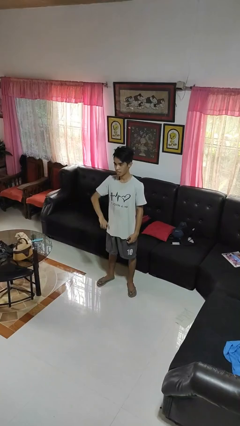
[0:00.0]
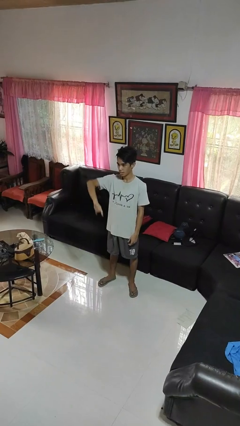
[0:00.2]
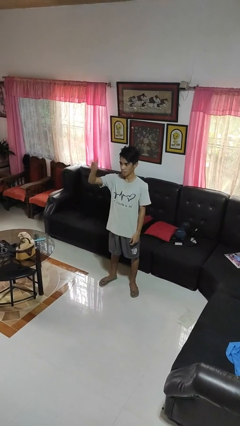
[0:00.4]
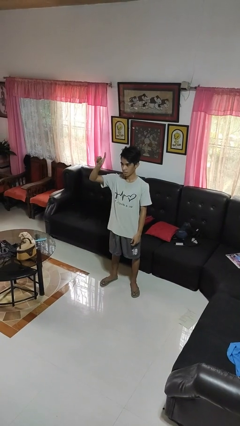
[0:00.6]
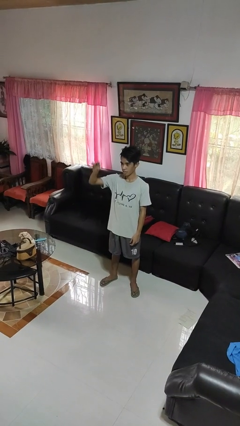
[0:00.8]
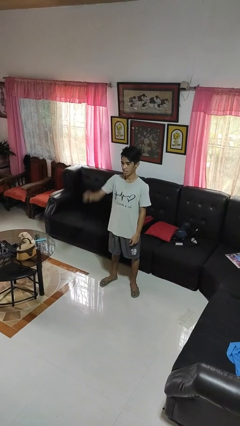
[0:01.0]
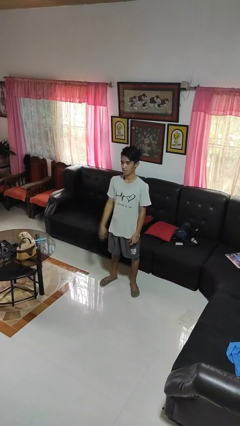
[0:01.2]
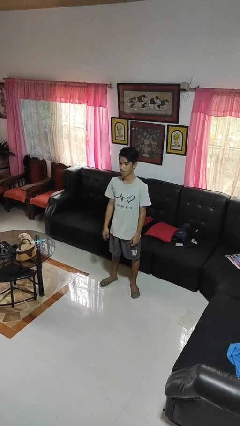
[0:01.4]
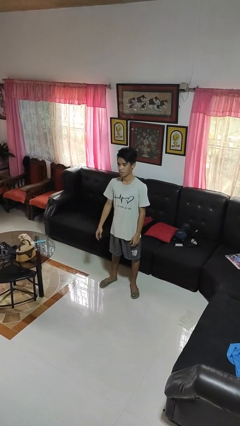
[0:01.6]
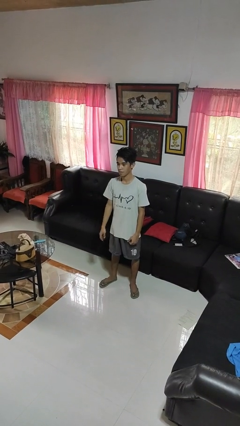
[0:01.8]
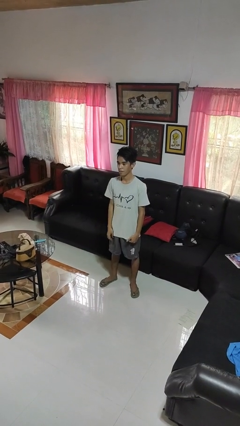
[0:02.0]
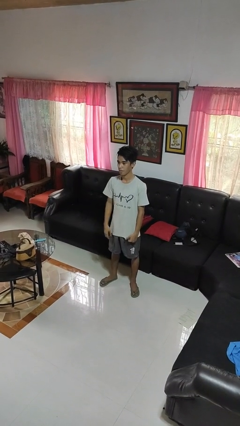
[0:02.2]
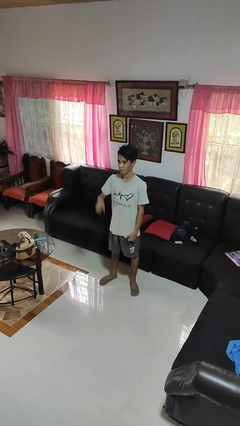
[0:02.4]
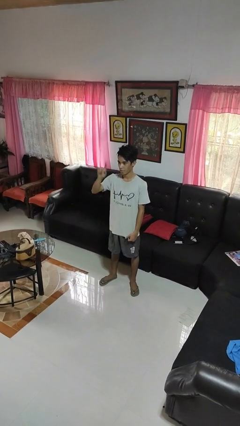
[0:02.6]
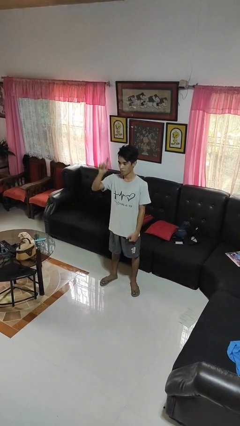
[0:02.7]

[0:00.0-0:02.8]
person gestures swipe up

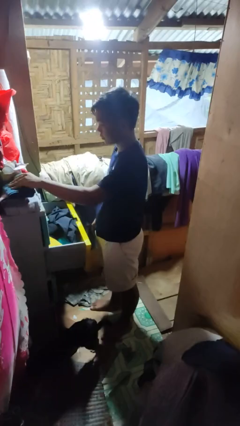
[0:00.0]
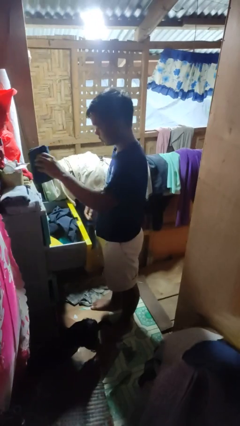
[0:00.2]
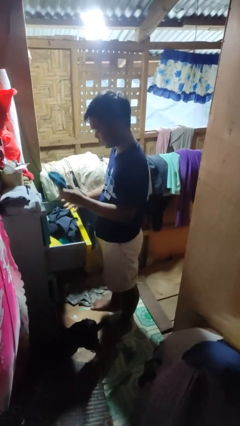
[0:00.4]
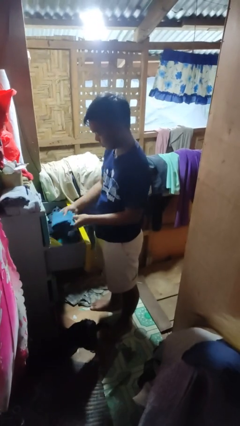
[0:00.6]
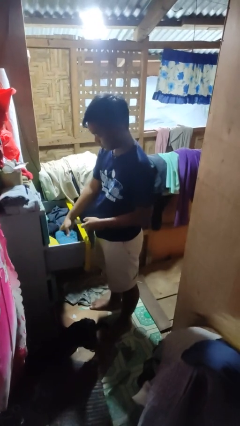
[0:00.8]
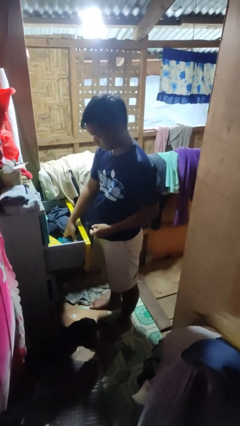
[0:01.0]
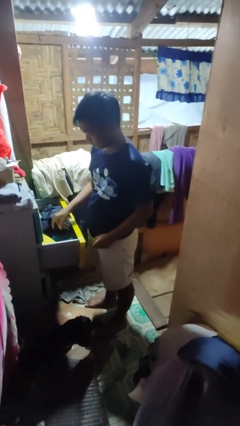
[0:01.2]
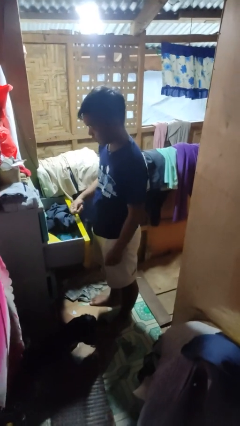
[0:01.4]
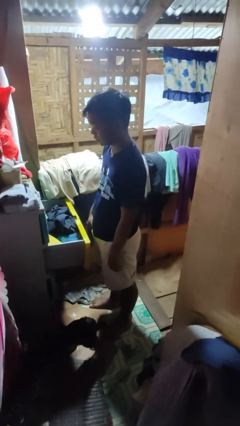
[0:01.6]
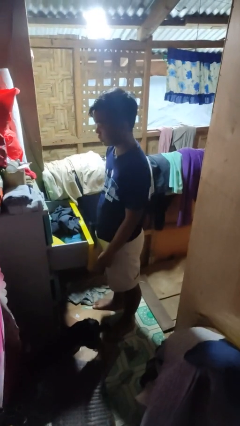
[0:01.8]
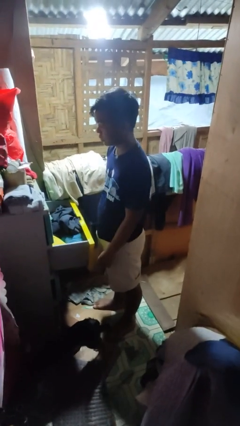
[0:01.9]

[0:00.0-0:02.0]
person puts clothes into dresser

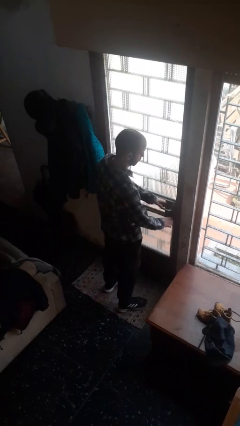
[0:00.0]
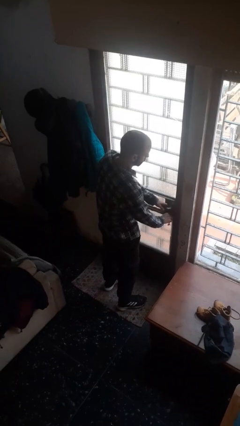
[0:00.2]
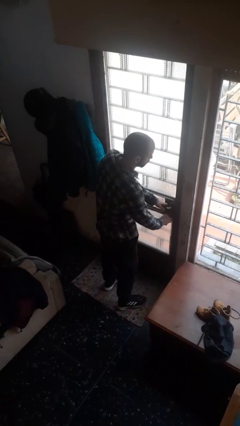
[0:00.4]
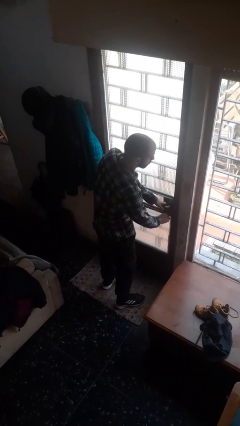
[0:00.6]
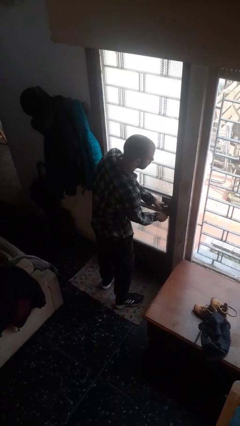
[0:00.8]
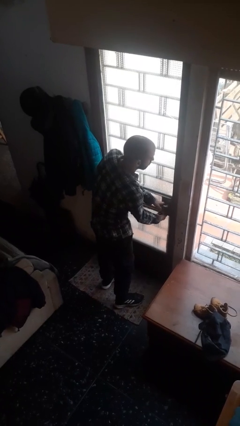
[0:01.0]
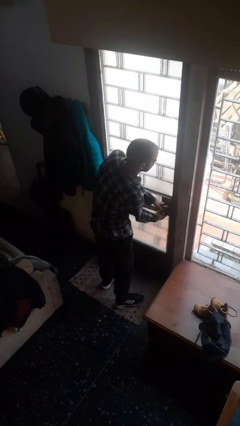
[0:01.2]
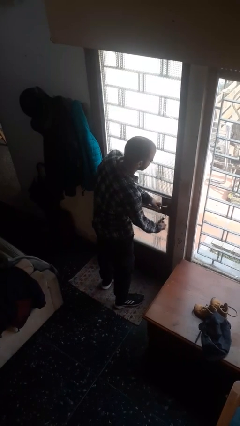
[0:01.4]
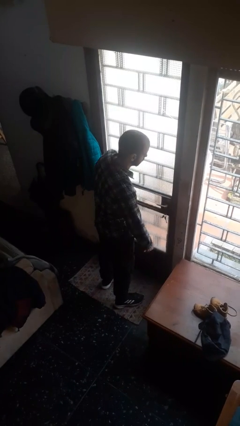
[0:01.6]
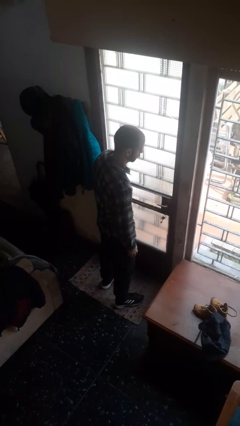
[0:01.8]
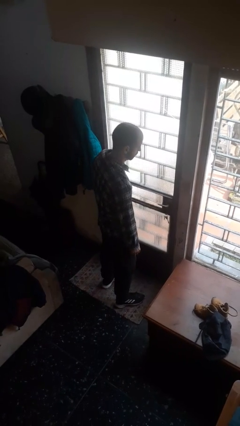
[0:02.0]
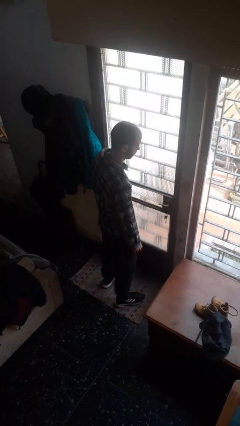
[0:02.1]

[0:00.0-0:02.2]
person locks door with keys

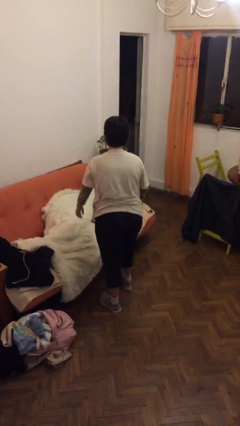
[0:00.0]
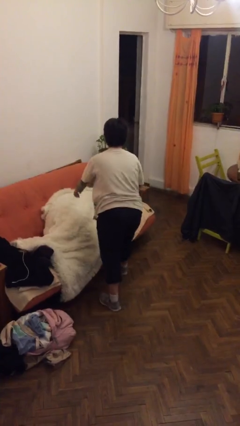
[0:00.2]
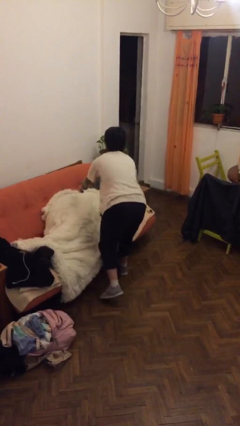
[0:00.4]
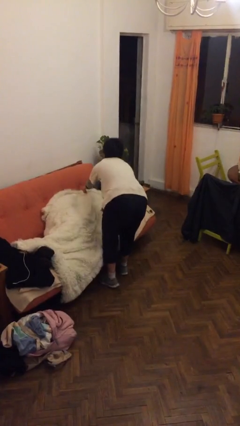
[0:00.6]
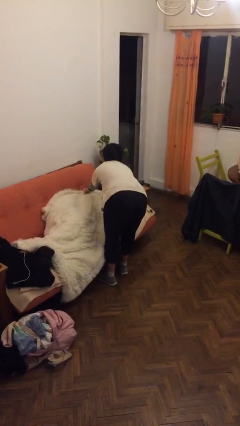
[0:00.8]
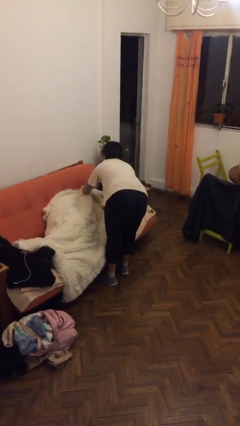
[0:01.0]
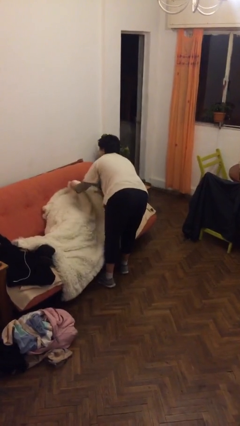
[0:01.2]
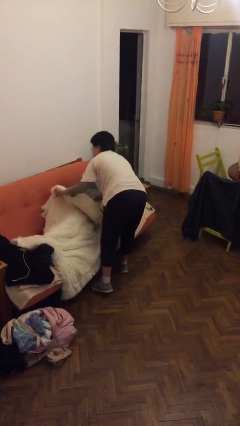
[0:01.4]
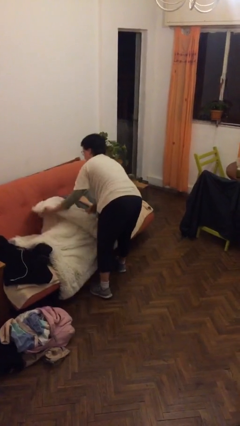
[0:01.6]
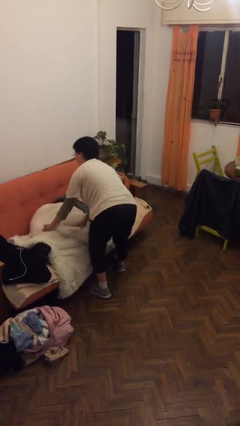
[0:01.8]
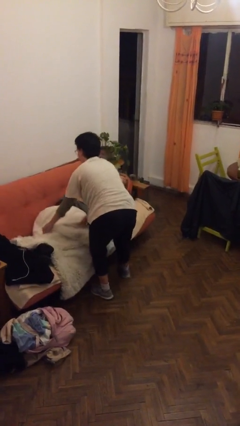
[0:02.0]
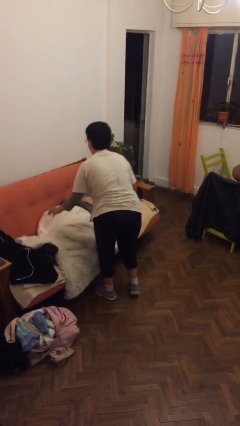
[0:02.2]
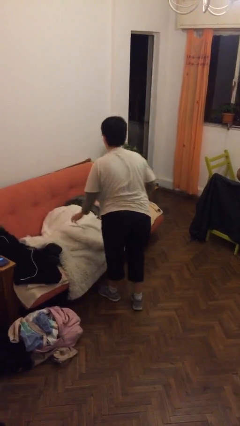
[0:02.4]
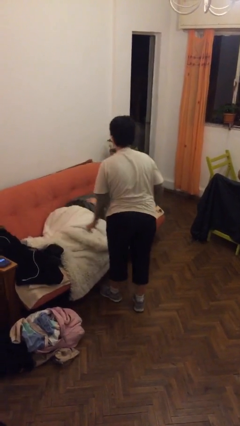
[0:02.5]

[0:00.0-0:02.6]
person uncovers friend with blanket

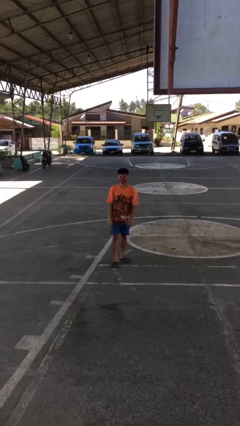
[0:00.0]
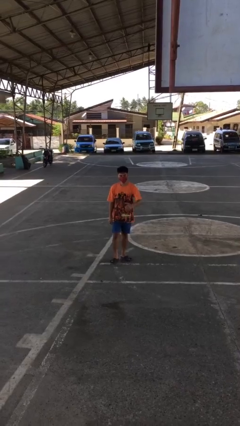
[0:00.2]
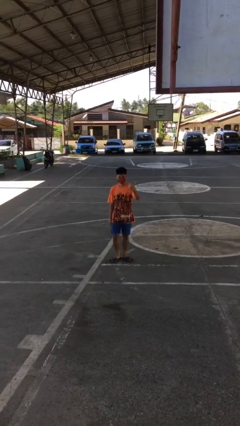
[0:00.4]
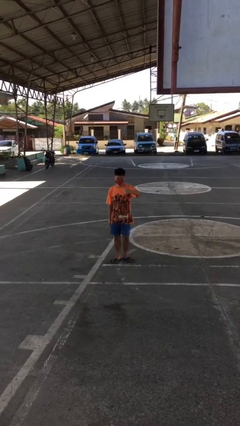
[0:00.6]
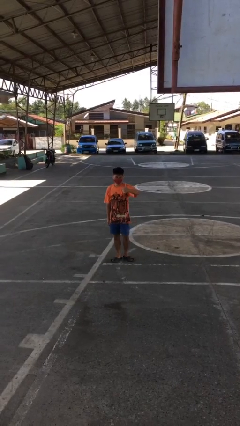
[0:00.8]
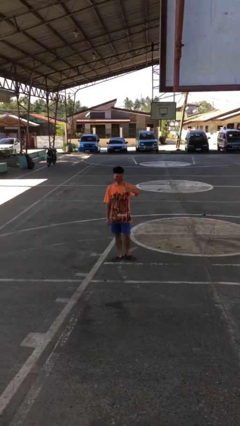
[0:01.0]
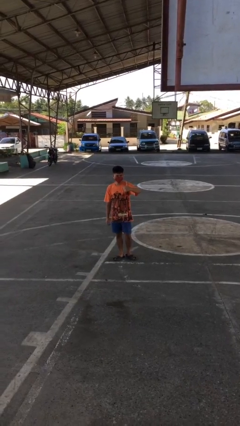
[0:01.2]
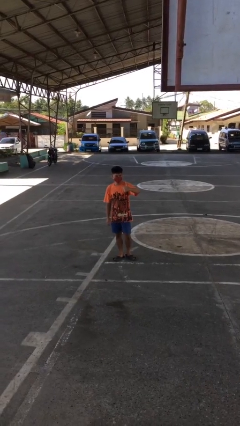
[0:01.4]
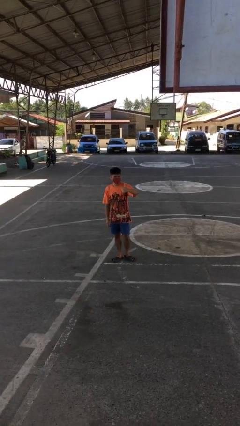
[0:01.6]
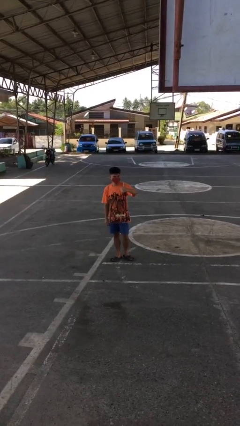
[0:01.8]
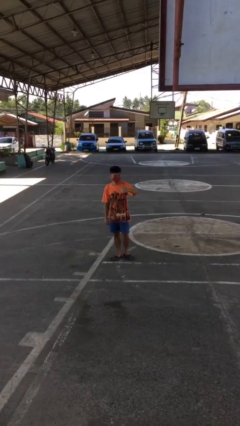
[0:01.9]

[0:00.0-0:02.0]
person gestures thumbs up

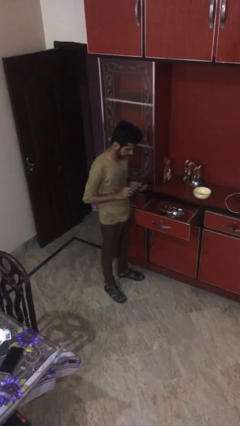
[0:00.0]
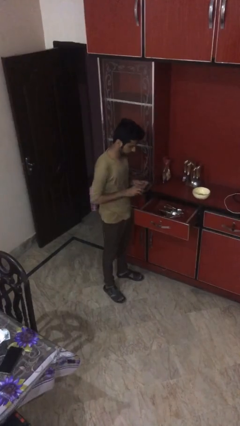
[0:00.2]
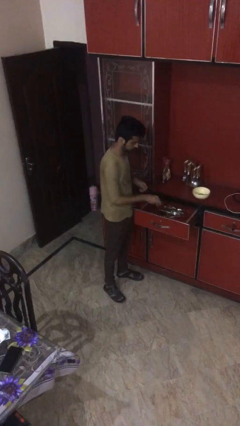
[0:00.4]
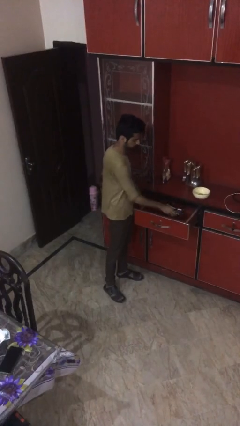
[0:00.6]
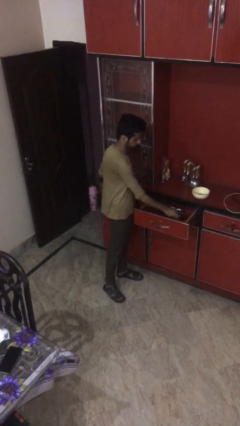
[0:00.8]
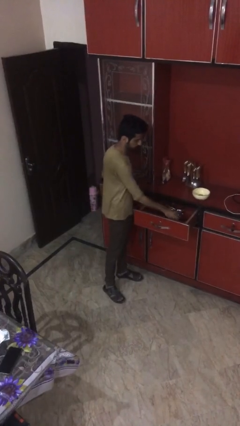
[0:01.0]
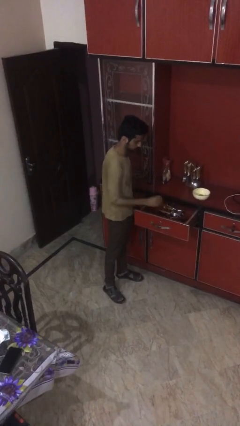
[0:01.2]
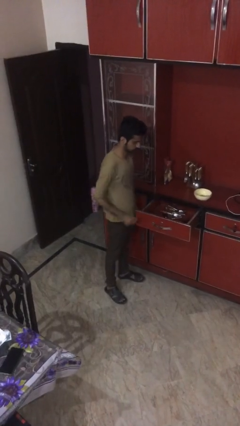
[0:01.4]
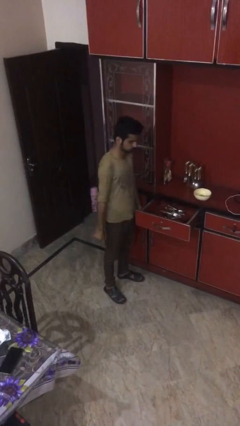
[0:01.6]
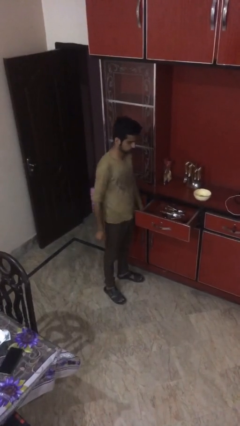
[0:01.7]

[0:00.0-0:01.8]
person puts object into kitchen drawer

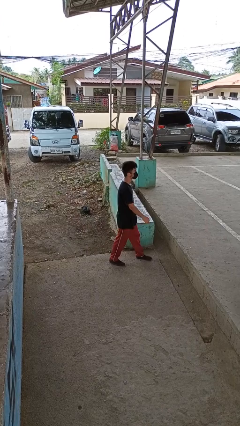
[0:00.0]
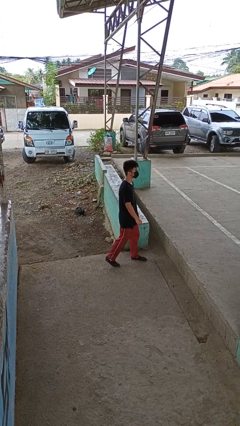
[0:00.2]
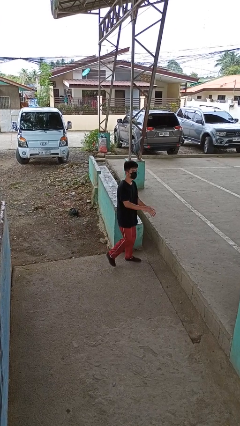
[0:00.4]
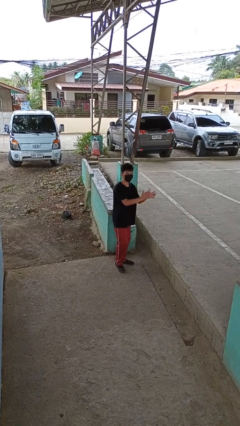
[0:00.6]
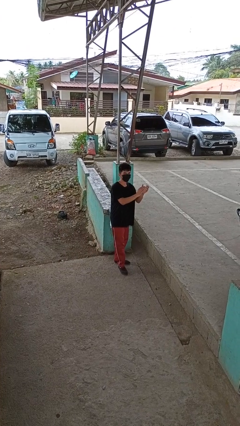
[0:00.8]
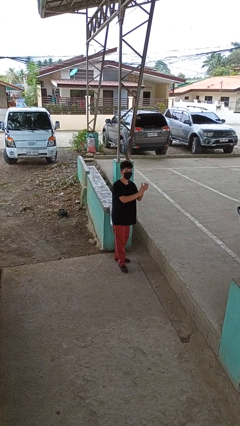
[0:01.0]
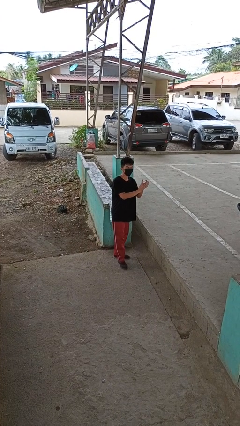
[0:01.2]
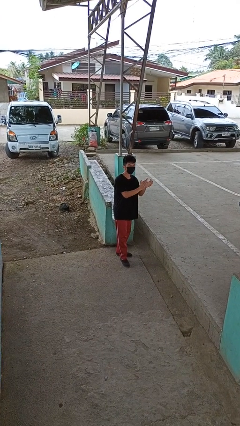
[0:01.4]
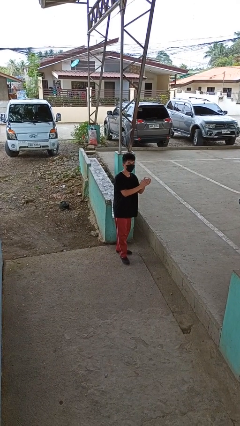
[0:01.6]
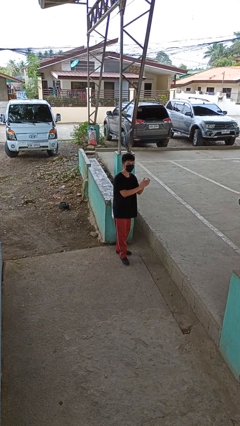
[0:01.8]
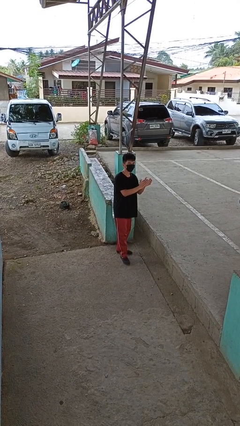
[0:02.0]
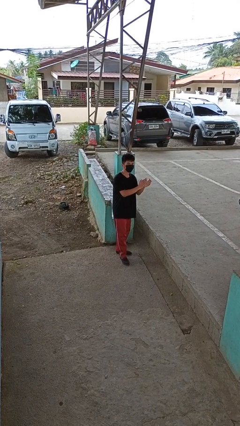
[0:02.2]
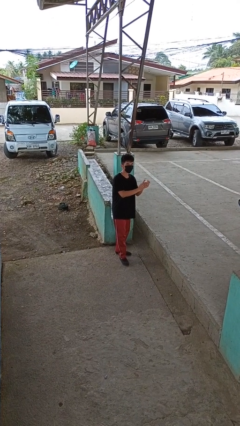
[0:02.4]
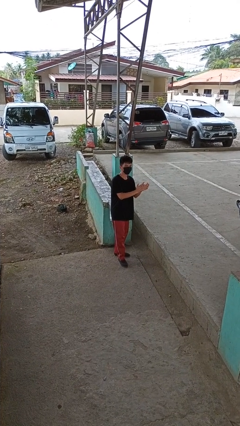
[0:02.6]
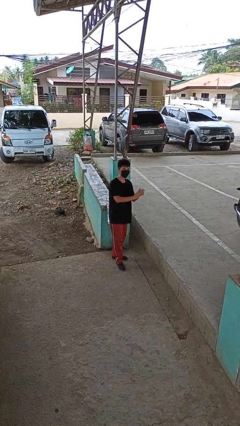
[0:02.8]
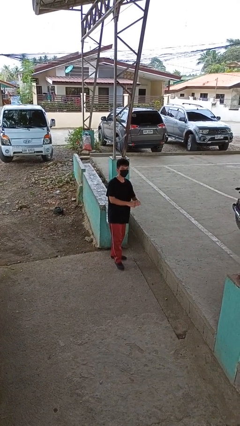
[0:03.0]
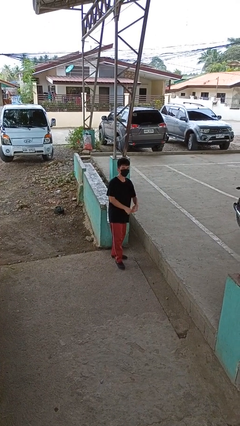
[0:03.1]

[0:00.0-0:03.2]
person claps hands

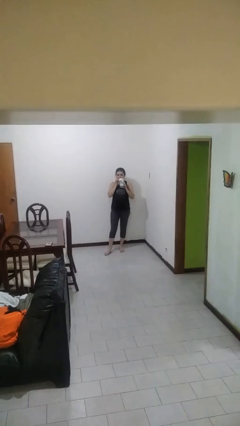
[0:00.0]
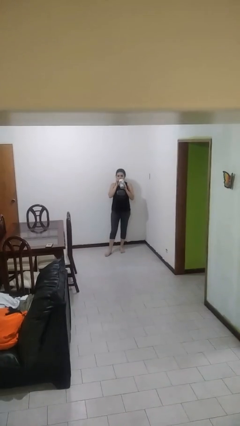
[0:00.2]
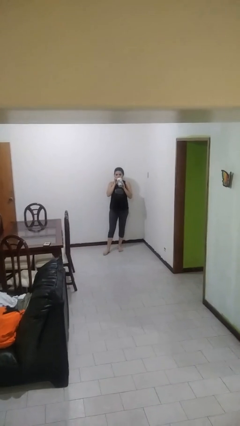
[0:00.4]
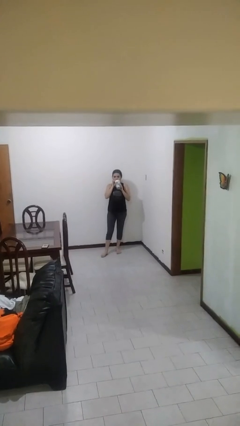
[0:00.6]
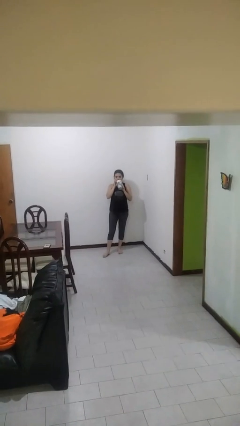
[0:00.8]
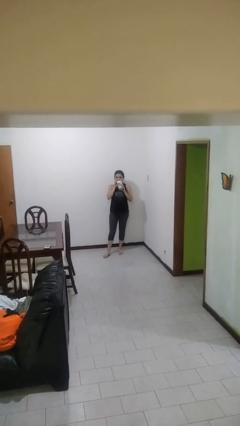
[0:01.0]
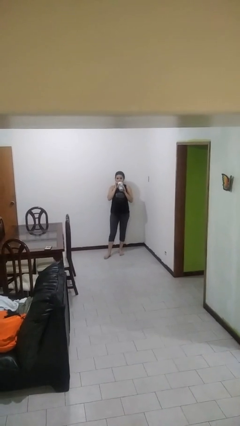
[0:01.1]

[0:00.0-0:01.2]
person drinks from straw
